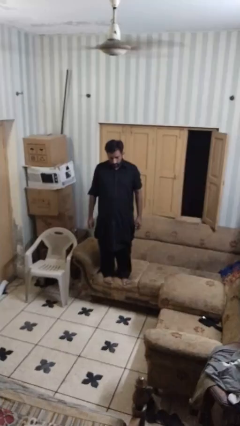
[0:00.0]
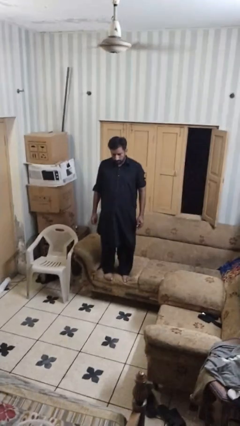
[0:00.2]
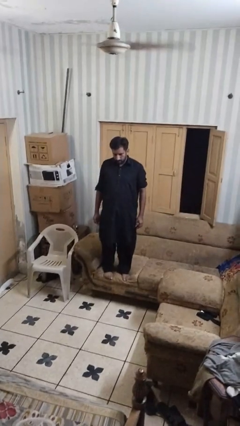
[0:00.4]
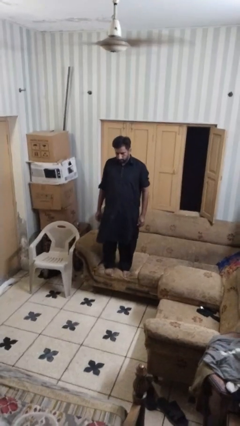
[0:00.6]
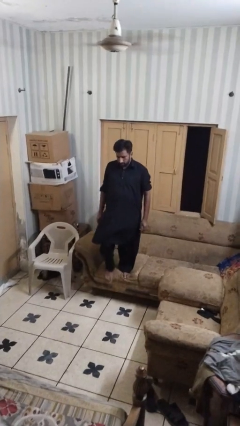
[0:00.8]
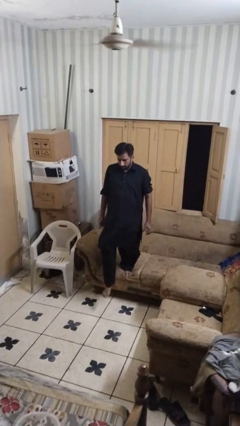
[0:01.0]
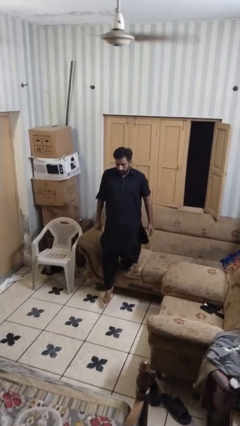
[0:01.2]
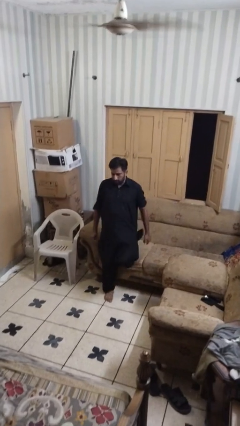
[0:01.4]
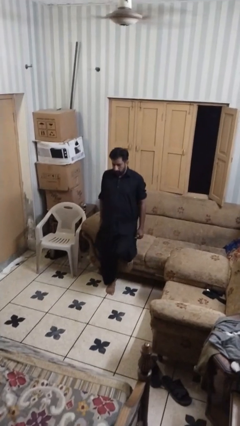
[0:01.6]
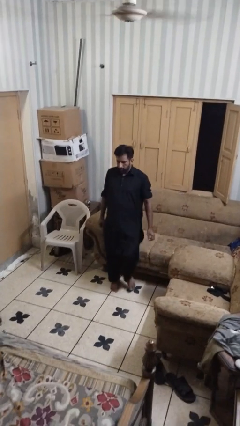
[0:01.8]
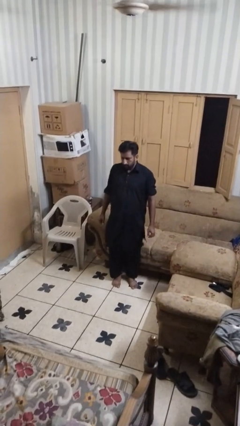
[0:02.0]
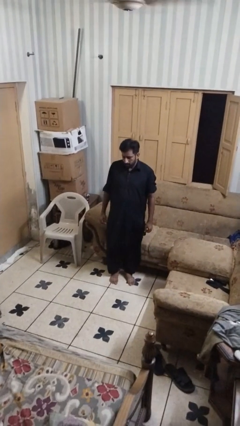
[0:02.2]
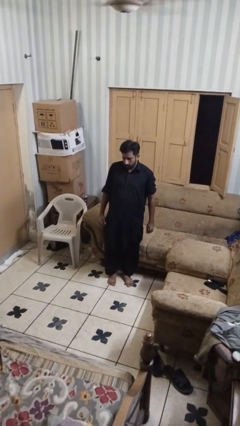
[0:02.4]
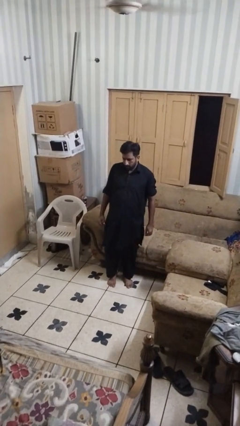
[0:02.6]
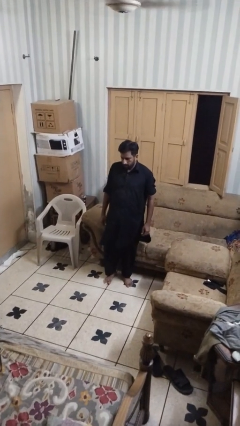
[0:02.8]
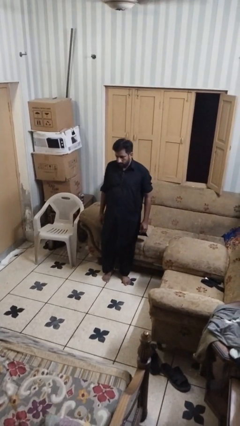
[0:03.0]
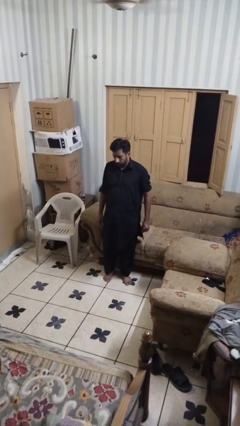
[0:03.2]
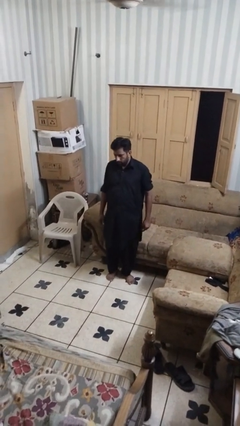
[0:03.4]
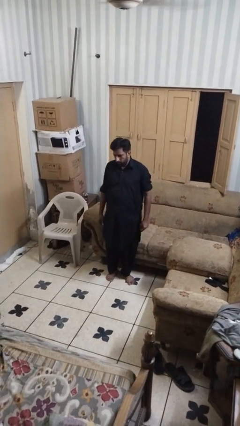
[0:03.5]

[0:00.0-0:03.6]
person climbs off couch

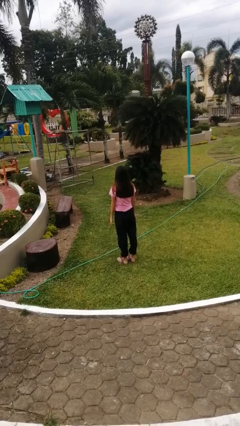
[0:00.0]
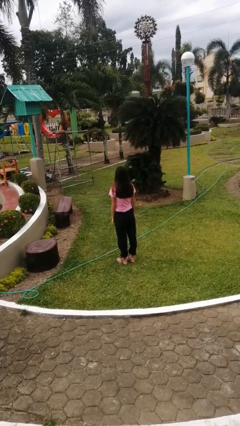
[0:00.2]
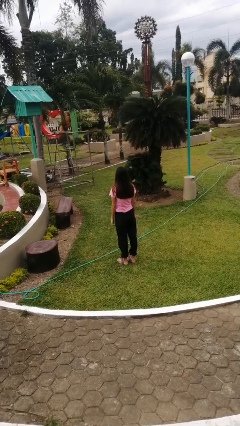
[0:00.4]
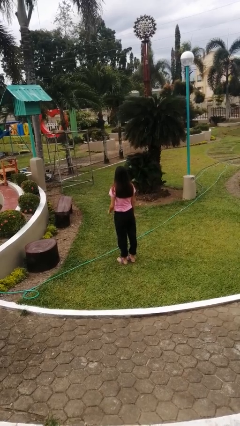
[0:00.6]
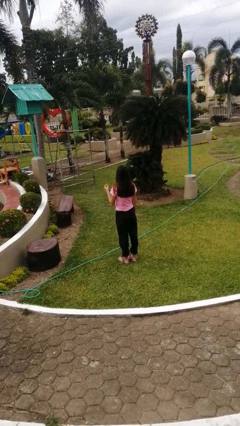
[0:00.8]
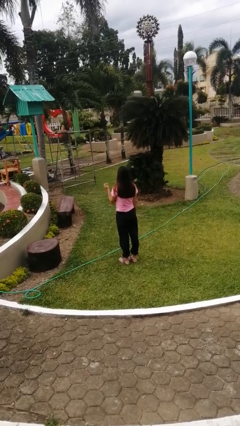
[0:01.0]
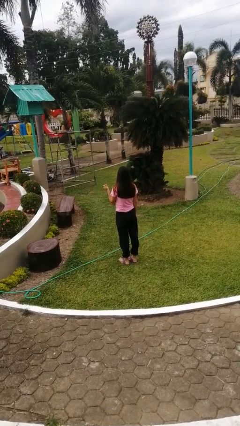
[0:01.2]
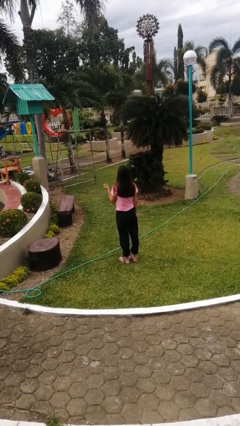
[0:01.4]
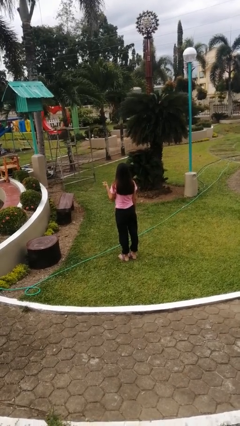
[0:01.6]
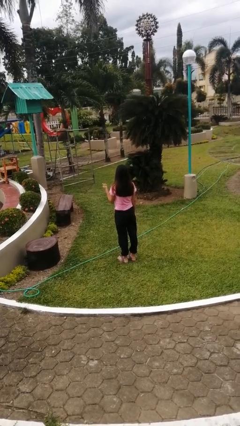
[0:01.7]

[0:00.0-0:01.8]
person snaps fingers

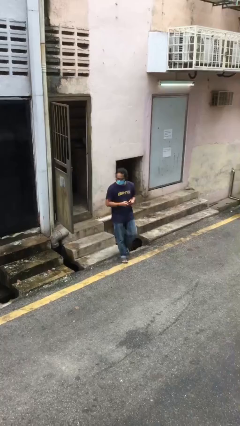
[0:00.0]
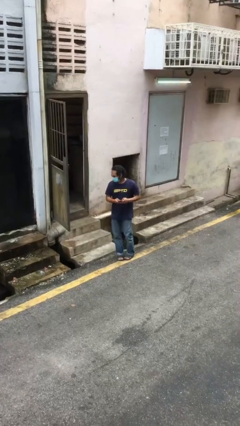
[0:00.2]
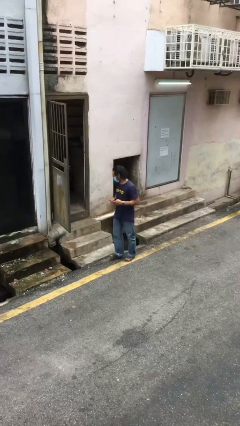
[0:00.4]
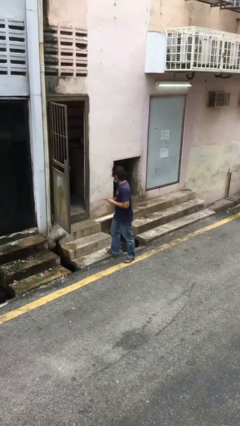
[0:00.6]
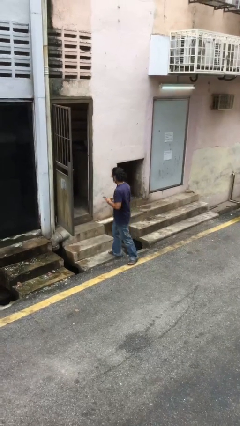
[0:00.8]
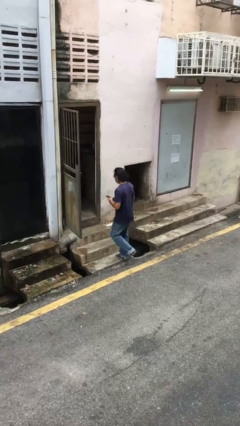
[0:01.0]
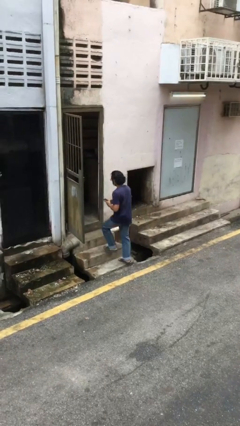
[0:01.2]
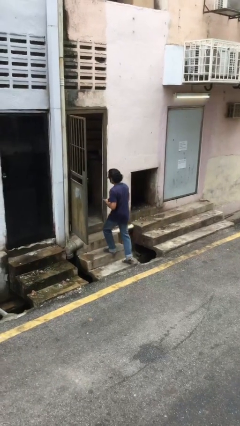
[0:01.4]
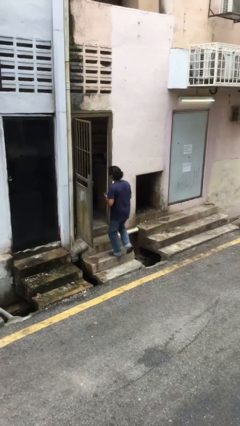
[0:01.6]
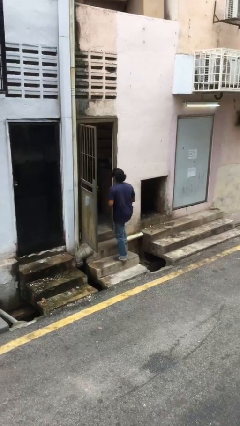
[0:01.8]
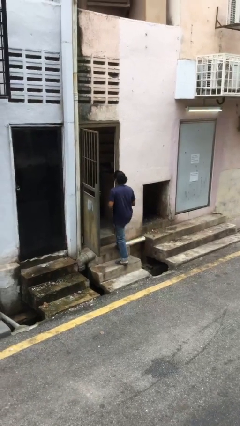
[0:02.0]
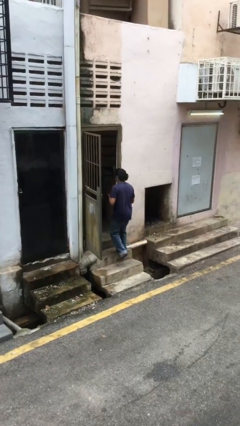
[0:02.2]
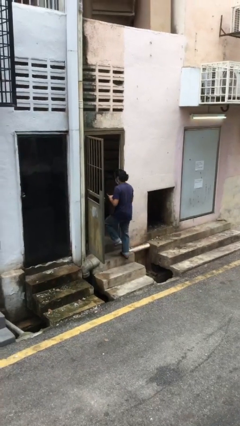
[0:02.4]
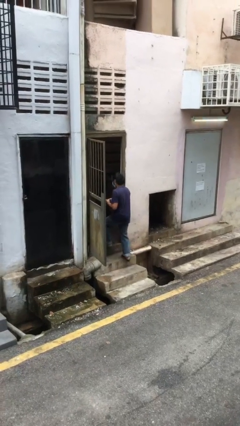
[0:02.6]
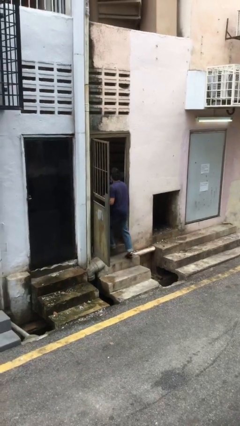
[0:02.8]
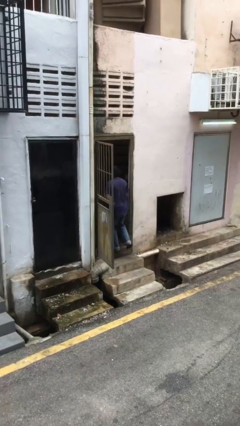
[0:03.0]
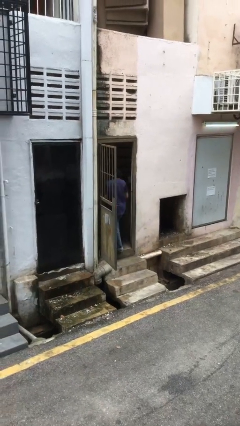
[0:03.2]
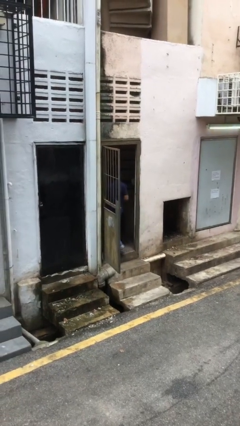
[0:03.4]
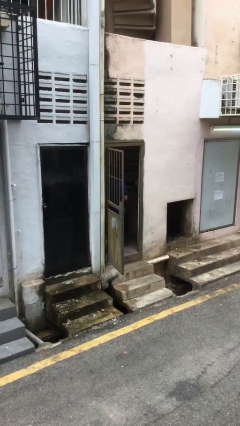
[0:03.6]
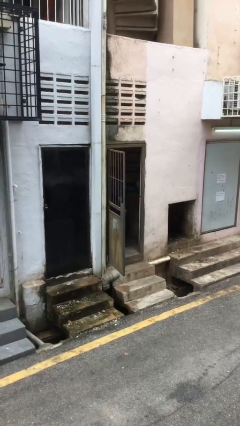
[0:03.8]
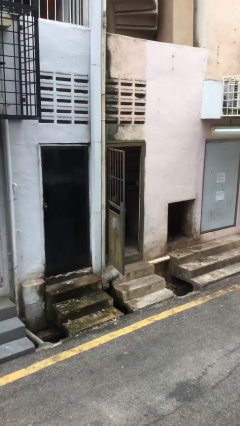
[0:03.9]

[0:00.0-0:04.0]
person exits scene through structure

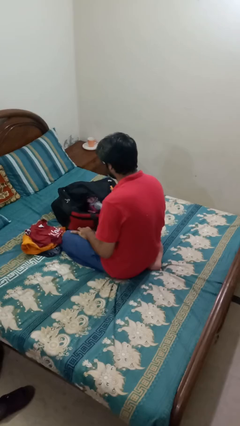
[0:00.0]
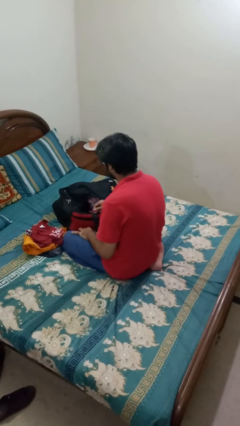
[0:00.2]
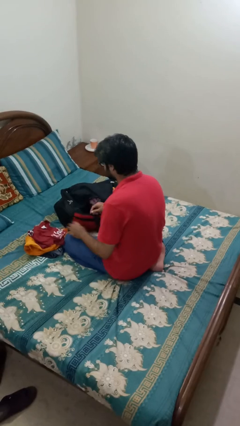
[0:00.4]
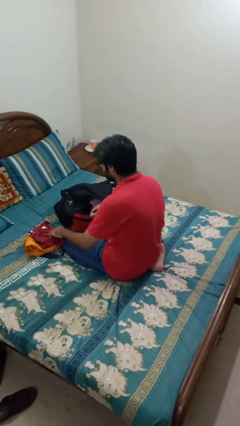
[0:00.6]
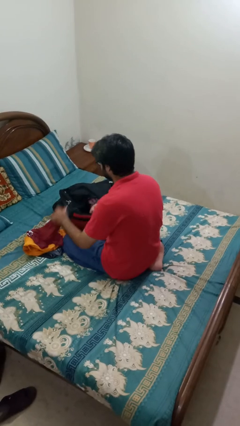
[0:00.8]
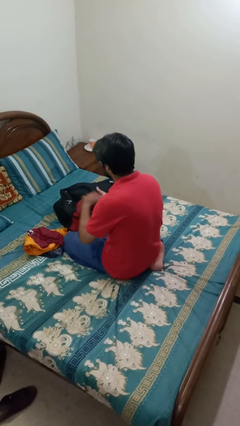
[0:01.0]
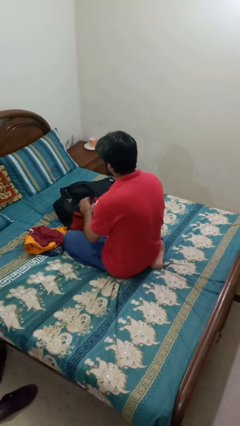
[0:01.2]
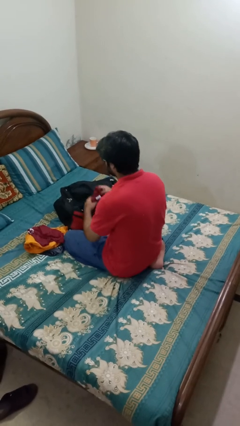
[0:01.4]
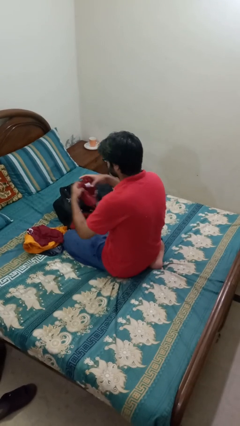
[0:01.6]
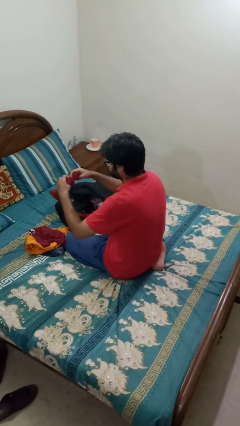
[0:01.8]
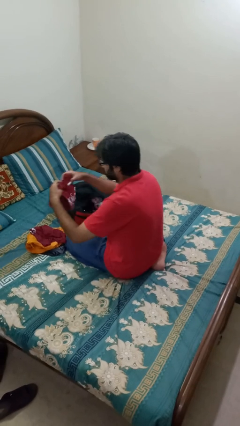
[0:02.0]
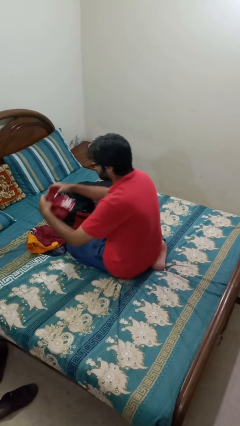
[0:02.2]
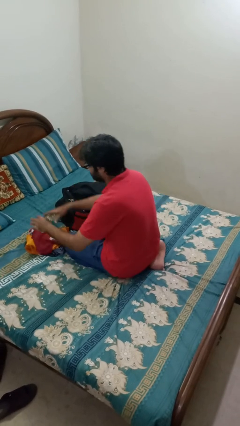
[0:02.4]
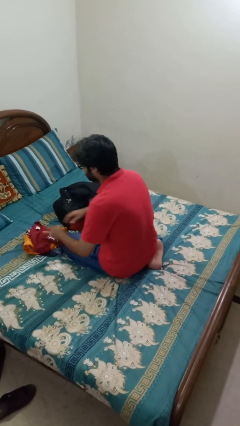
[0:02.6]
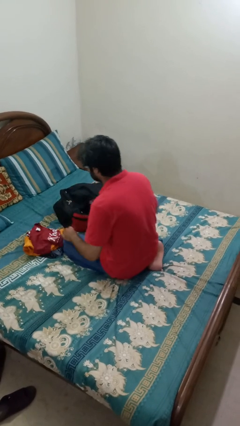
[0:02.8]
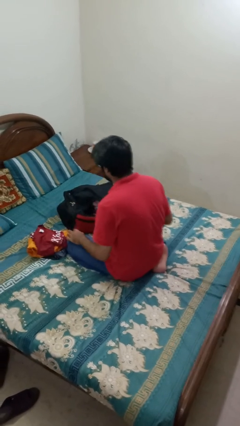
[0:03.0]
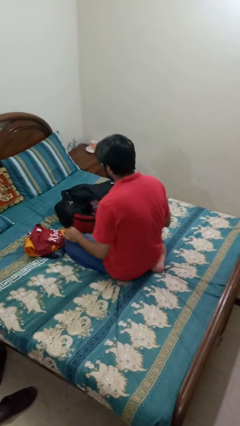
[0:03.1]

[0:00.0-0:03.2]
person unloads clothes from suitcase

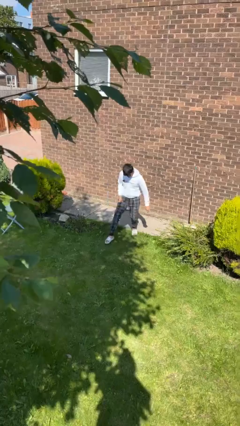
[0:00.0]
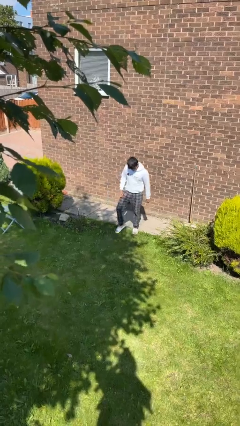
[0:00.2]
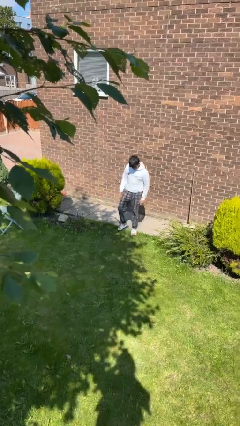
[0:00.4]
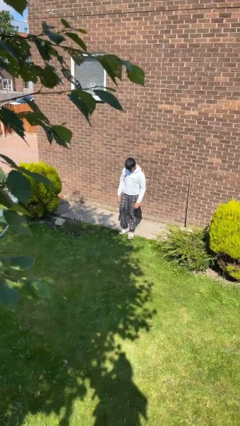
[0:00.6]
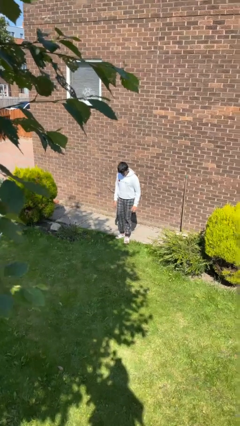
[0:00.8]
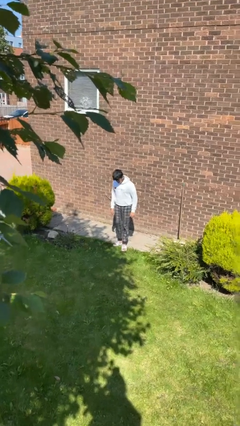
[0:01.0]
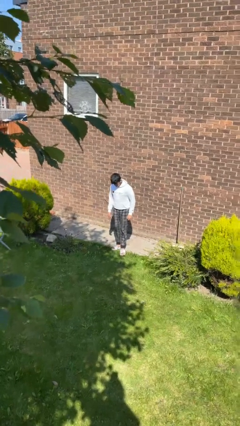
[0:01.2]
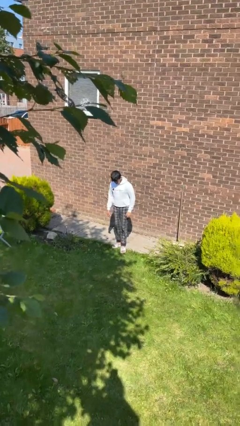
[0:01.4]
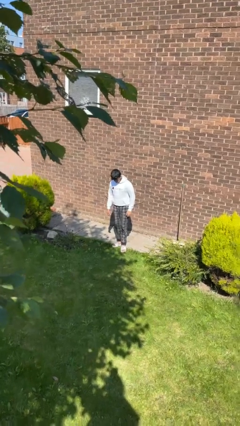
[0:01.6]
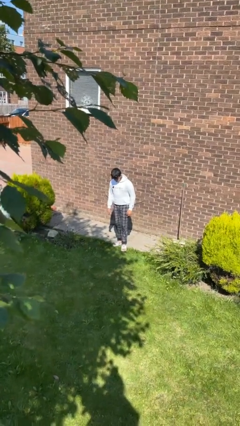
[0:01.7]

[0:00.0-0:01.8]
person stands up from floor

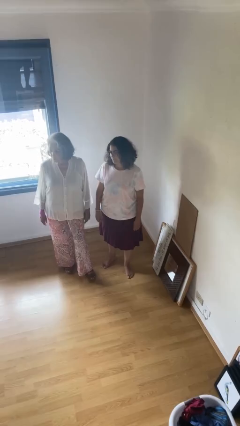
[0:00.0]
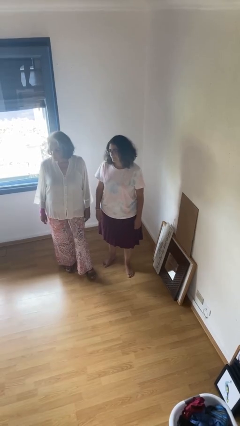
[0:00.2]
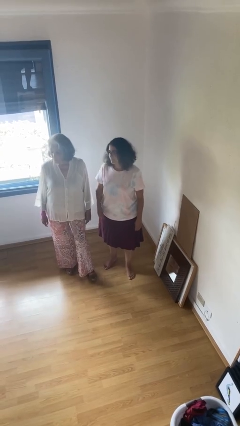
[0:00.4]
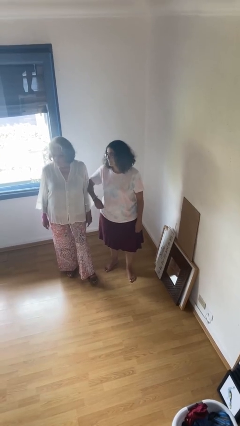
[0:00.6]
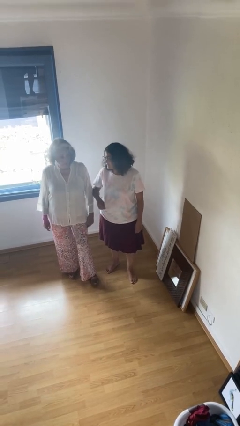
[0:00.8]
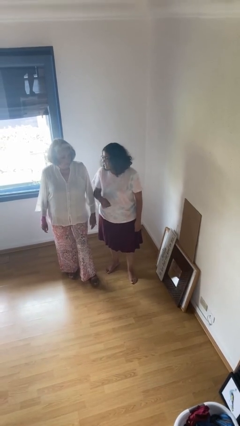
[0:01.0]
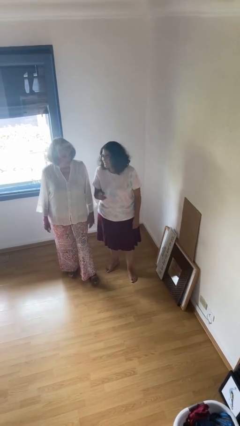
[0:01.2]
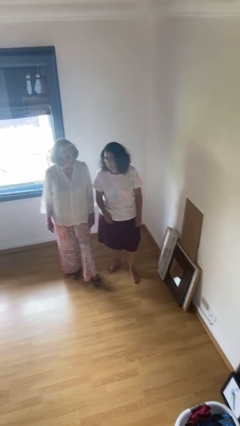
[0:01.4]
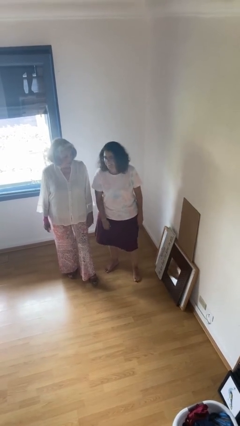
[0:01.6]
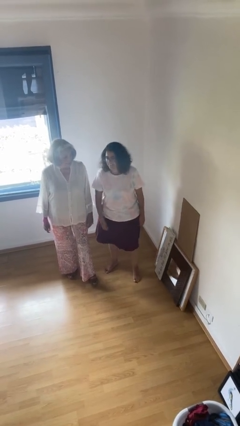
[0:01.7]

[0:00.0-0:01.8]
person nudges person with elbow

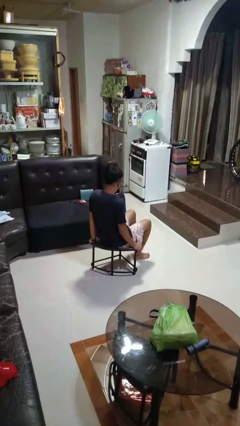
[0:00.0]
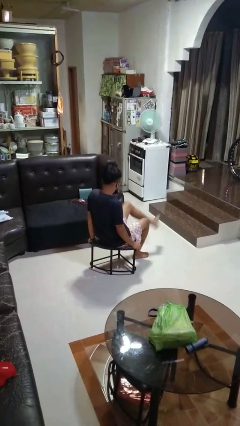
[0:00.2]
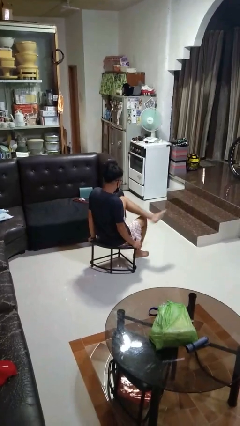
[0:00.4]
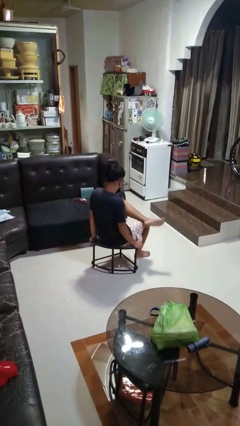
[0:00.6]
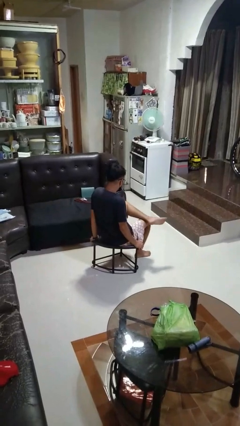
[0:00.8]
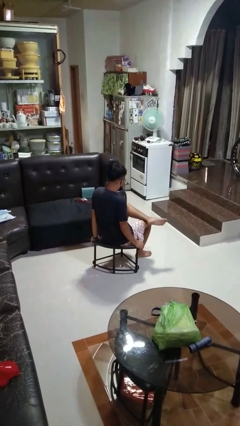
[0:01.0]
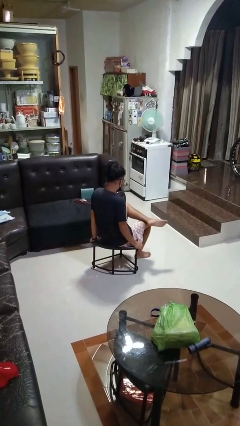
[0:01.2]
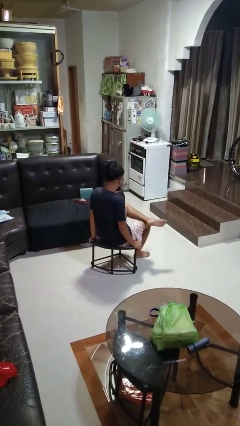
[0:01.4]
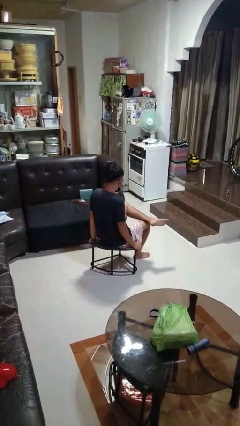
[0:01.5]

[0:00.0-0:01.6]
person crosses legs
